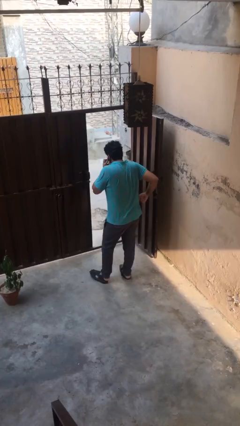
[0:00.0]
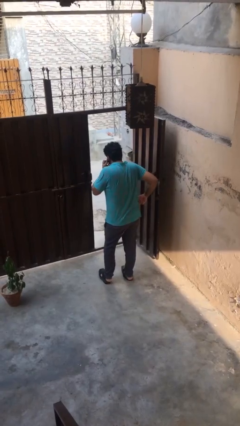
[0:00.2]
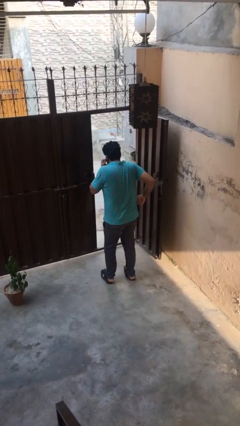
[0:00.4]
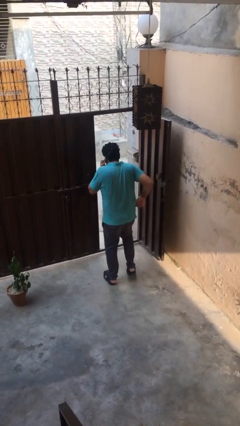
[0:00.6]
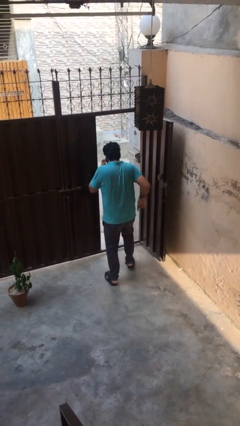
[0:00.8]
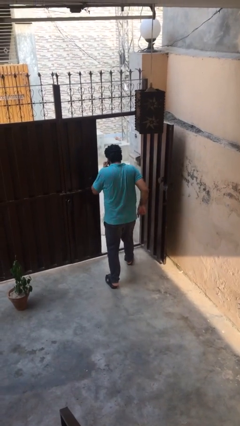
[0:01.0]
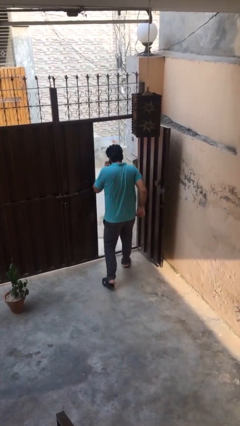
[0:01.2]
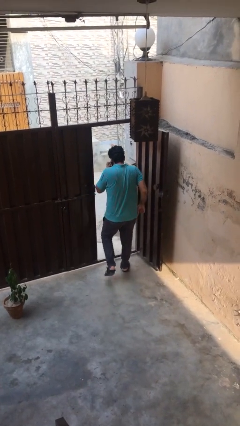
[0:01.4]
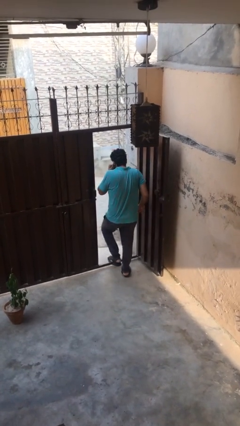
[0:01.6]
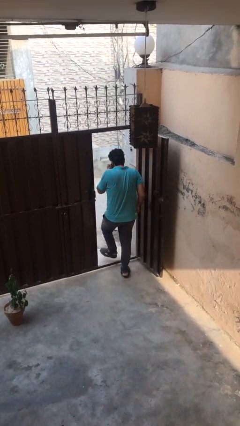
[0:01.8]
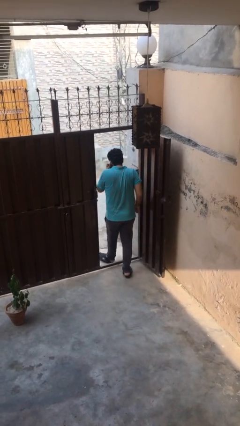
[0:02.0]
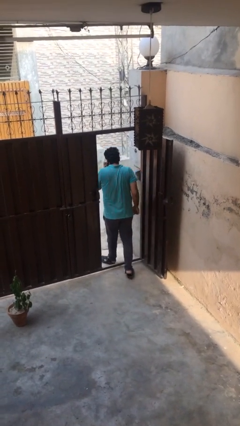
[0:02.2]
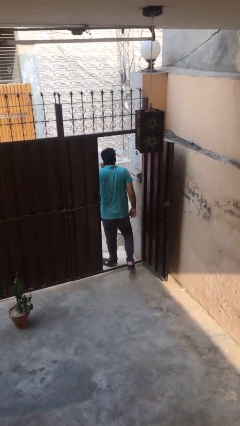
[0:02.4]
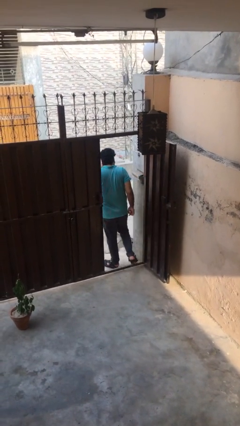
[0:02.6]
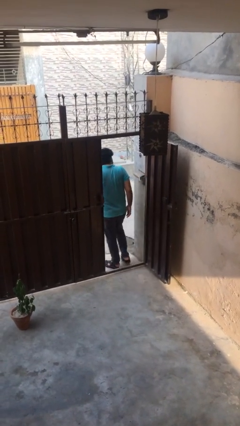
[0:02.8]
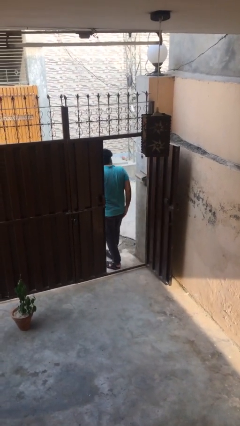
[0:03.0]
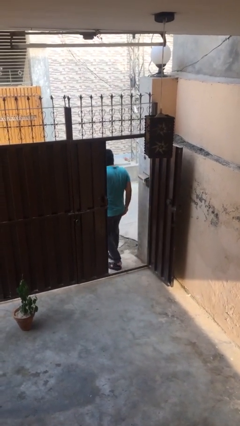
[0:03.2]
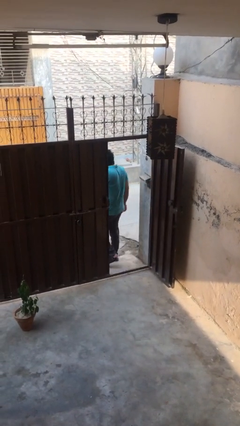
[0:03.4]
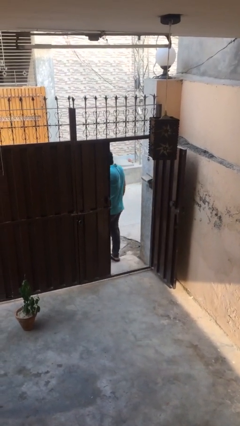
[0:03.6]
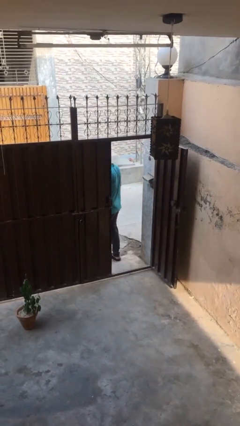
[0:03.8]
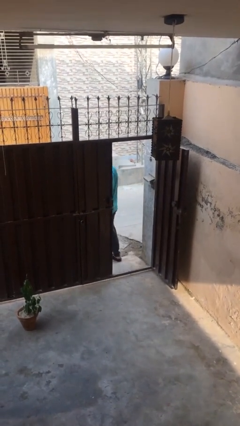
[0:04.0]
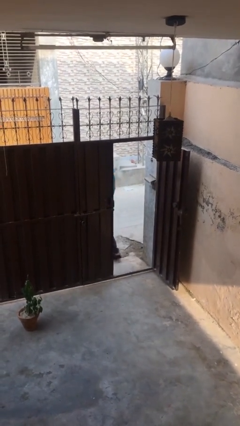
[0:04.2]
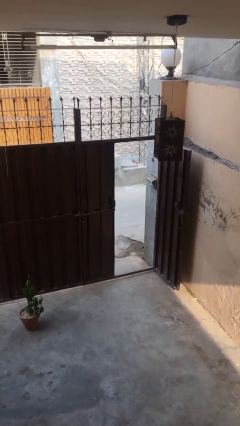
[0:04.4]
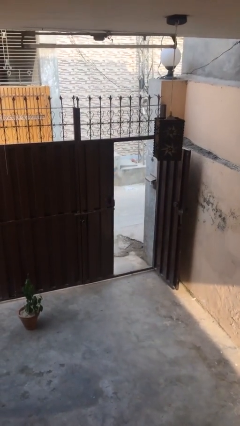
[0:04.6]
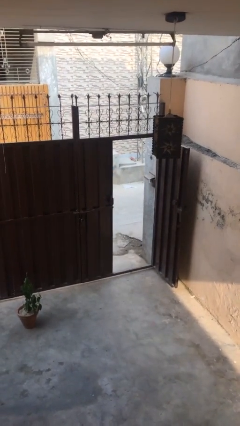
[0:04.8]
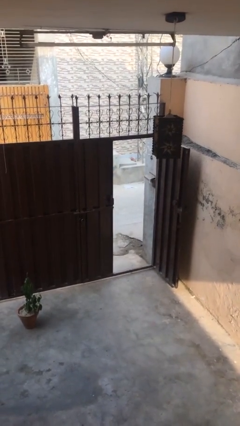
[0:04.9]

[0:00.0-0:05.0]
person exits scene through structure

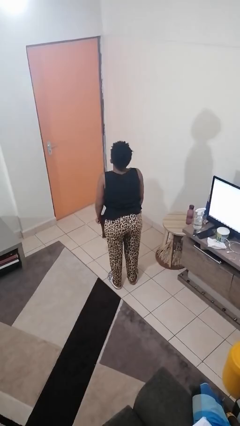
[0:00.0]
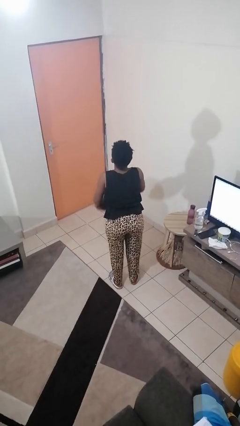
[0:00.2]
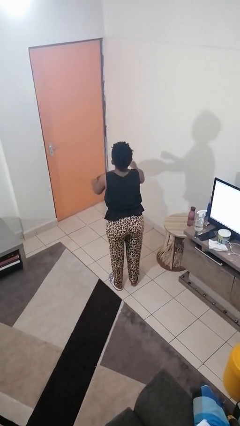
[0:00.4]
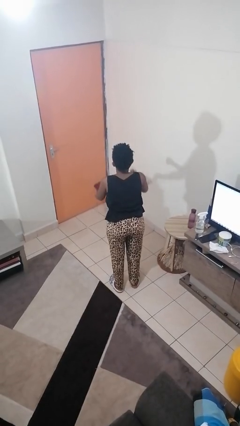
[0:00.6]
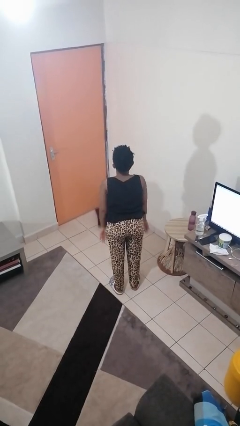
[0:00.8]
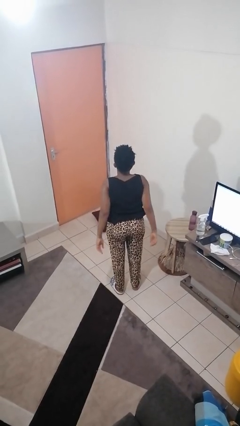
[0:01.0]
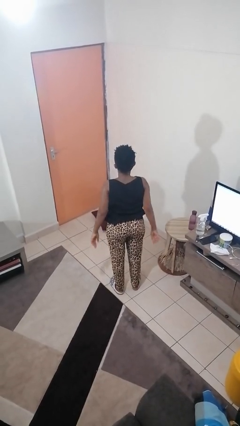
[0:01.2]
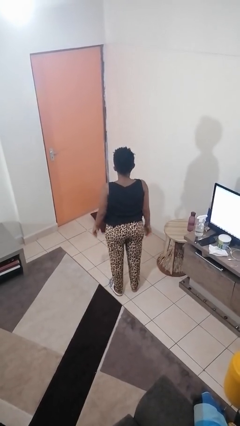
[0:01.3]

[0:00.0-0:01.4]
person throws object to ground

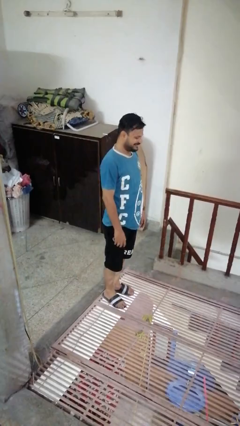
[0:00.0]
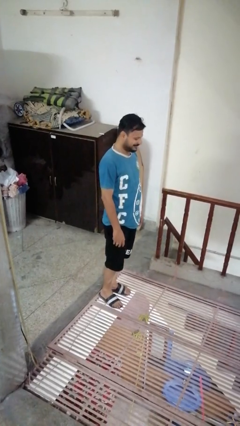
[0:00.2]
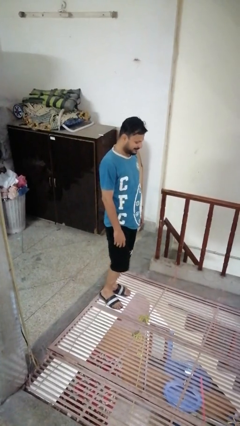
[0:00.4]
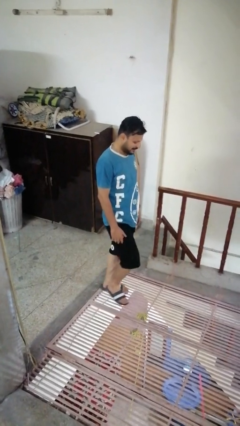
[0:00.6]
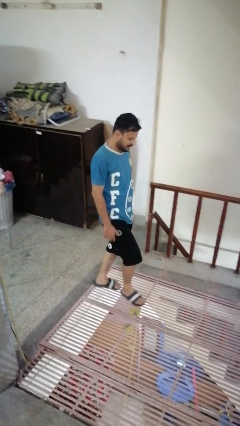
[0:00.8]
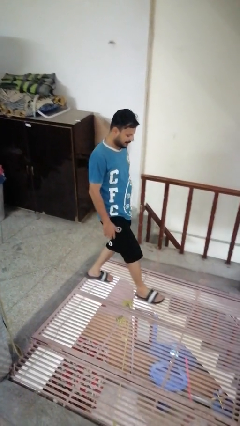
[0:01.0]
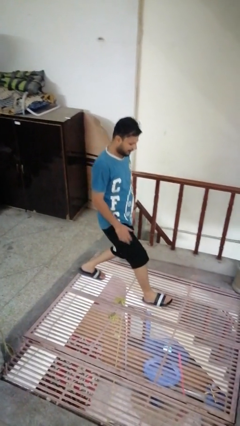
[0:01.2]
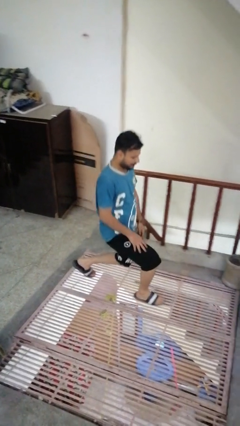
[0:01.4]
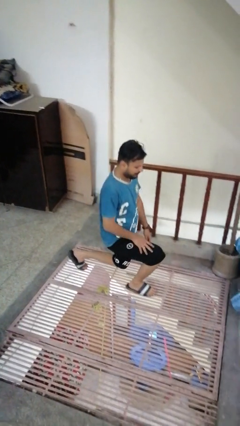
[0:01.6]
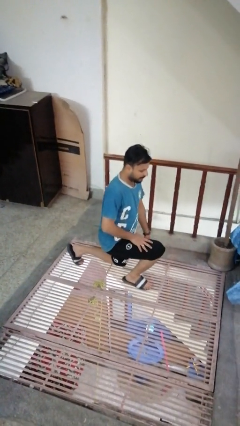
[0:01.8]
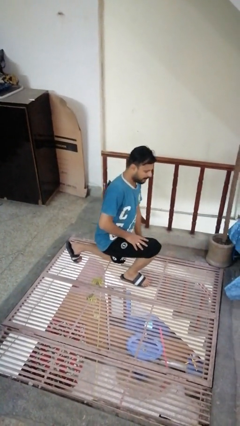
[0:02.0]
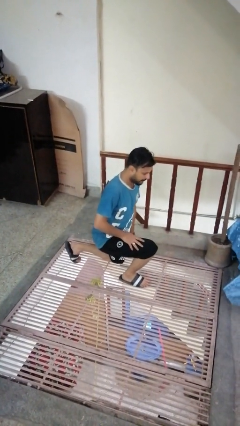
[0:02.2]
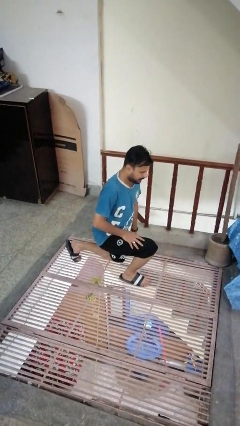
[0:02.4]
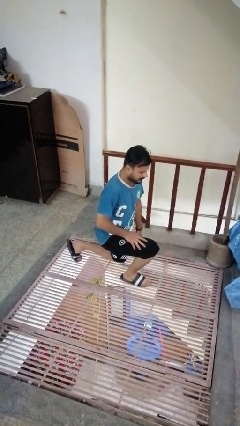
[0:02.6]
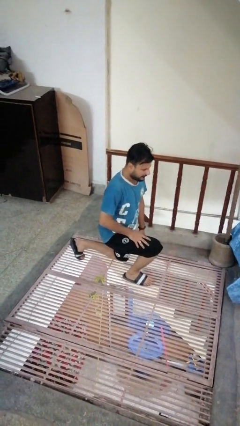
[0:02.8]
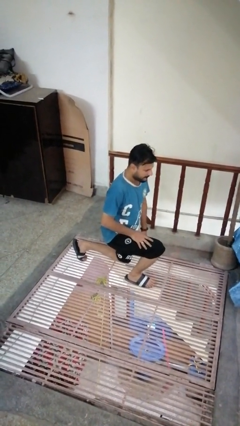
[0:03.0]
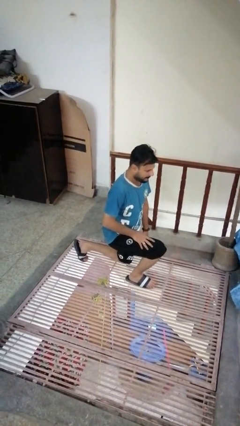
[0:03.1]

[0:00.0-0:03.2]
person exercises with lunges

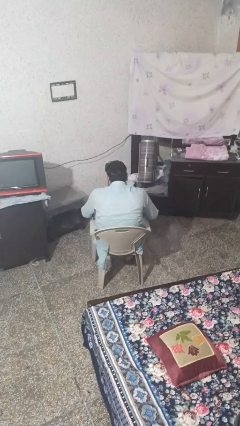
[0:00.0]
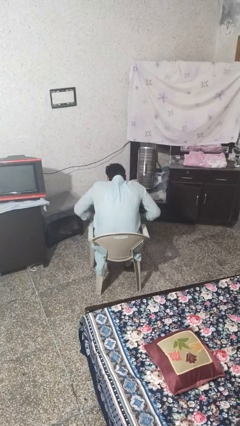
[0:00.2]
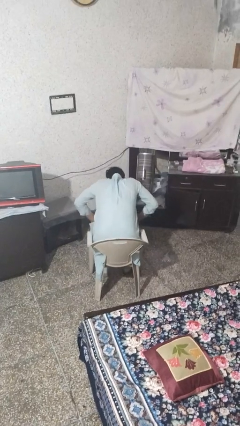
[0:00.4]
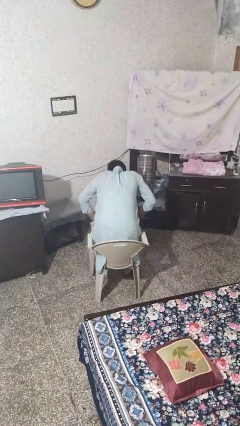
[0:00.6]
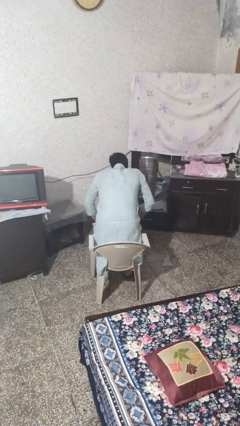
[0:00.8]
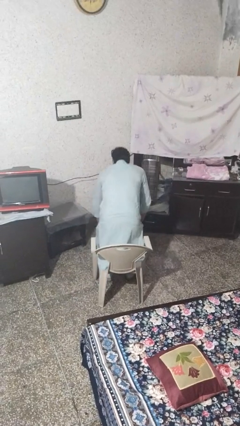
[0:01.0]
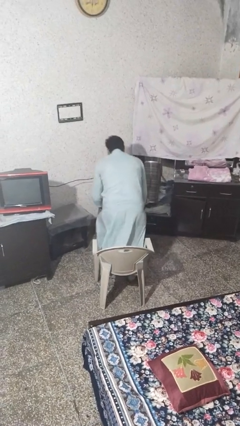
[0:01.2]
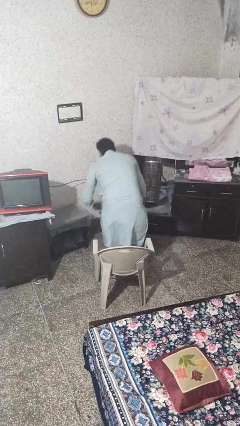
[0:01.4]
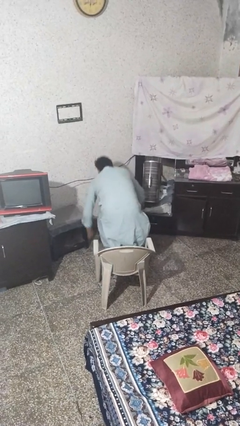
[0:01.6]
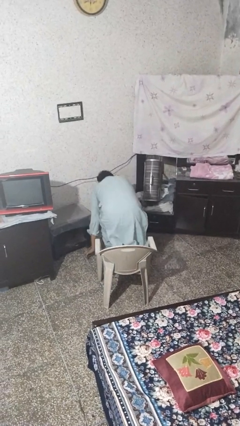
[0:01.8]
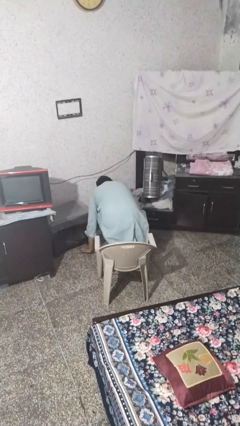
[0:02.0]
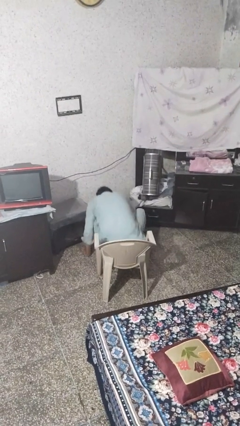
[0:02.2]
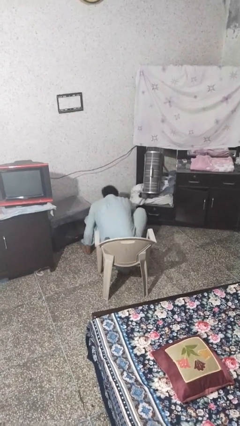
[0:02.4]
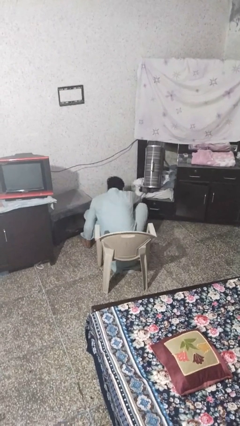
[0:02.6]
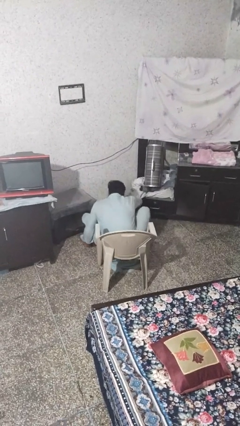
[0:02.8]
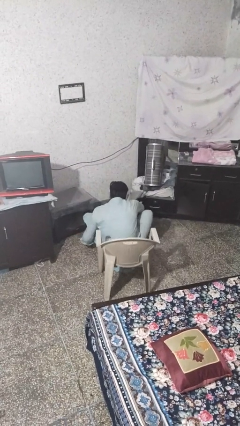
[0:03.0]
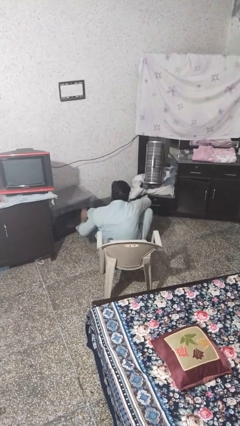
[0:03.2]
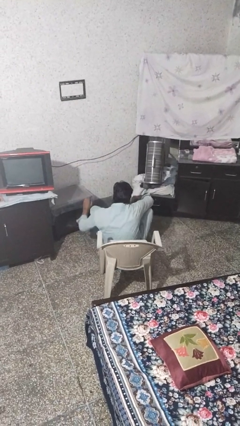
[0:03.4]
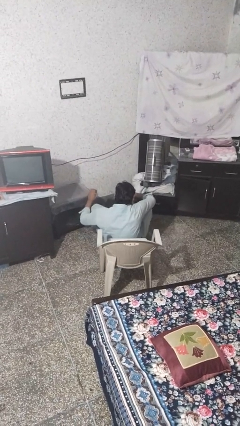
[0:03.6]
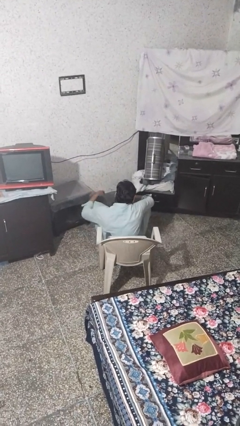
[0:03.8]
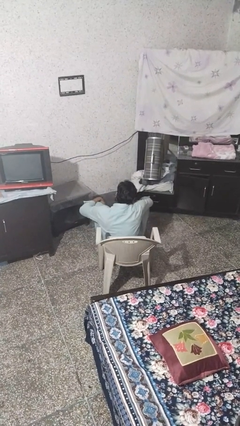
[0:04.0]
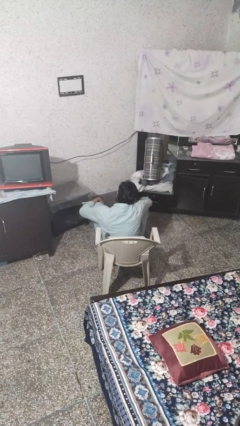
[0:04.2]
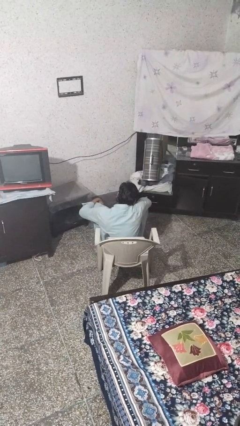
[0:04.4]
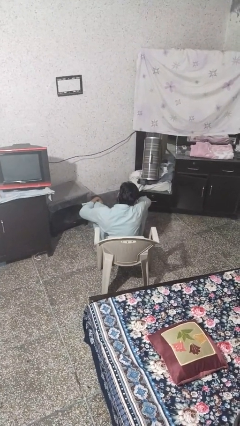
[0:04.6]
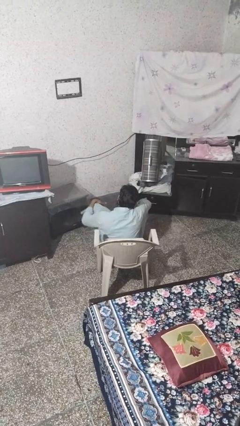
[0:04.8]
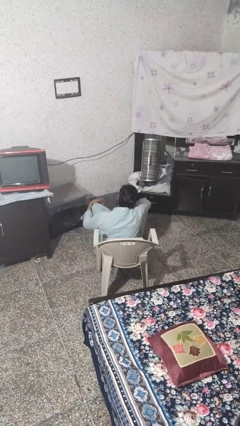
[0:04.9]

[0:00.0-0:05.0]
person falls from chair

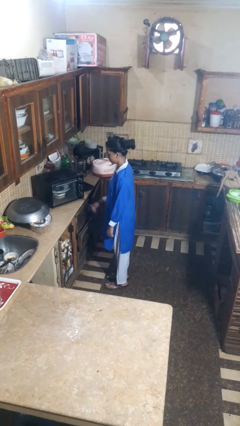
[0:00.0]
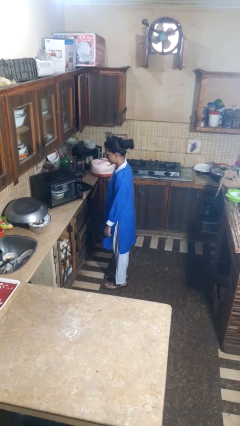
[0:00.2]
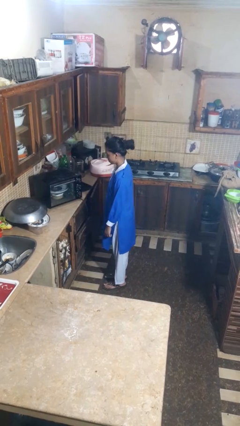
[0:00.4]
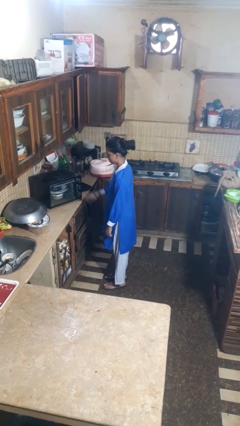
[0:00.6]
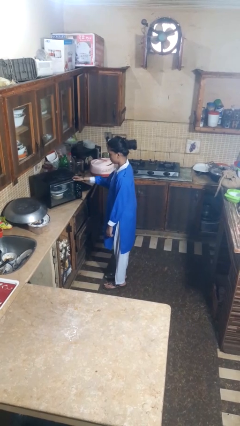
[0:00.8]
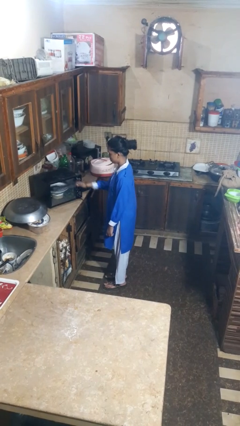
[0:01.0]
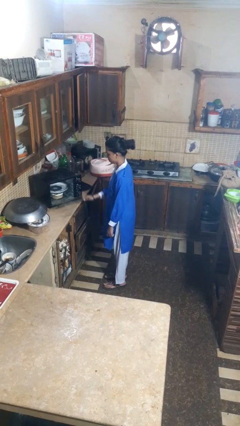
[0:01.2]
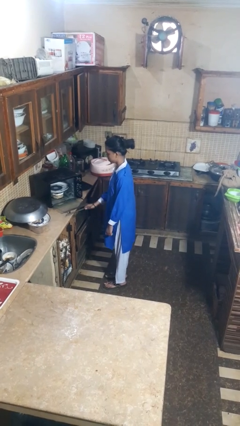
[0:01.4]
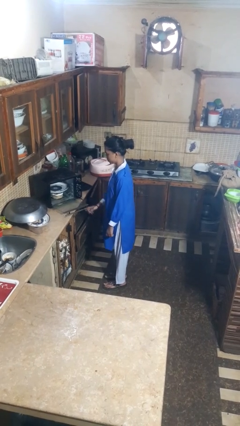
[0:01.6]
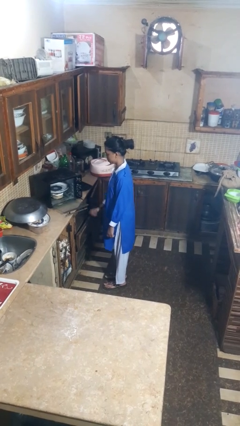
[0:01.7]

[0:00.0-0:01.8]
person opens dishwasher

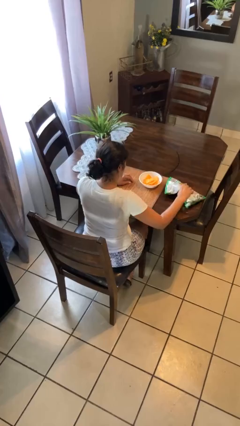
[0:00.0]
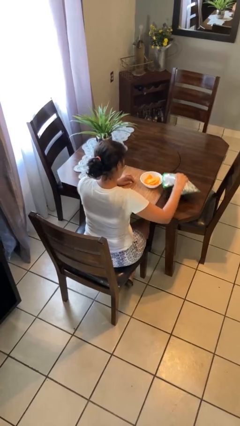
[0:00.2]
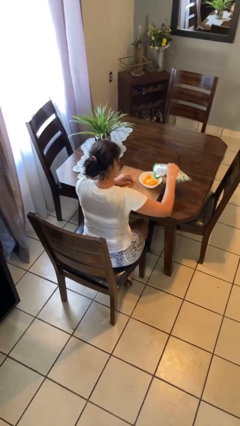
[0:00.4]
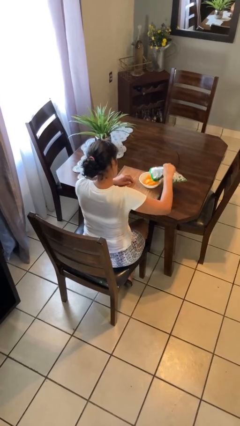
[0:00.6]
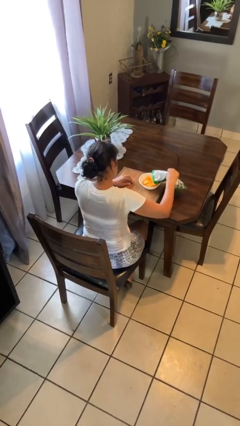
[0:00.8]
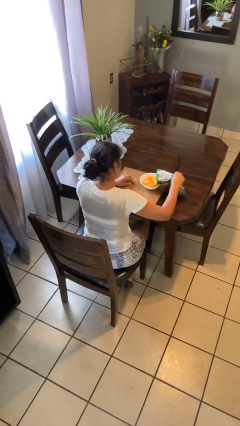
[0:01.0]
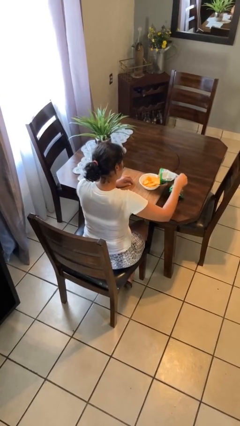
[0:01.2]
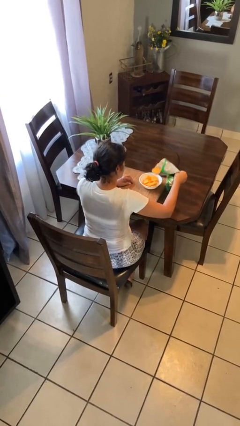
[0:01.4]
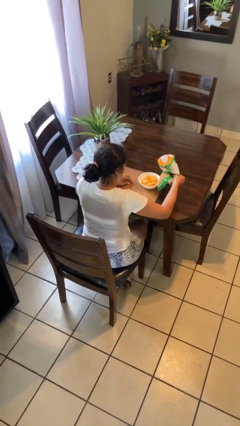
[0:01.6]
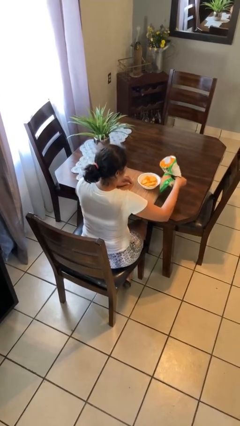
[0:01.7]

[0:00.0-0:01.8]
person pours into bowl
